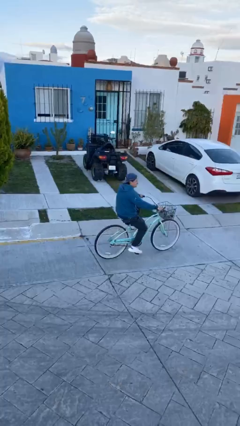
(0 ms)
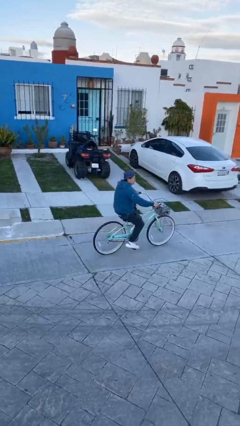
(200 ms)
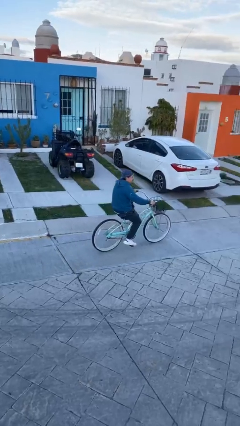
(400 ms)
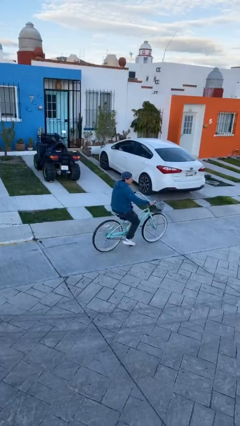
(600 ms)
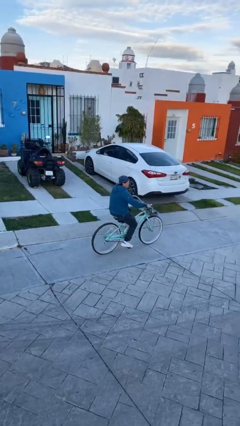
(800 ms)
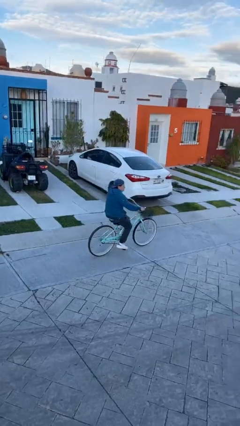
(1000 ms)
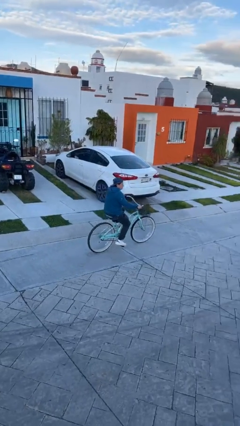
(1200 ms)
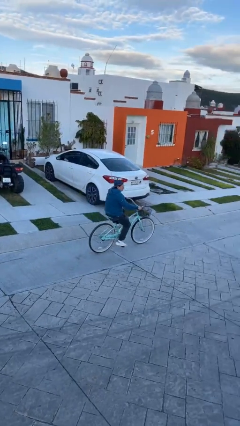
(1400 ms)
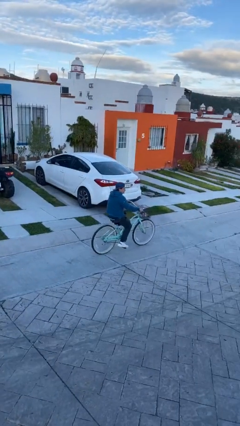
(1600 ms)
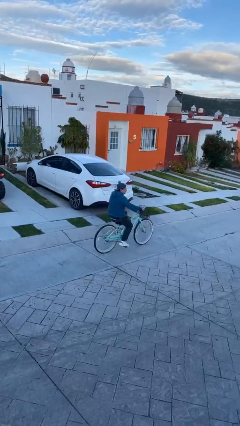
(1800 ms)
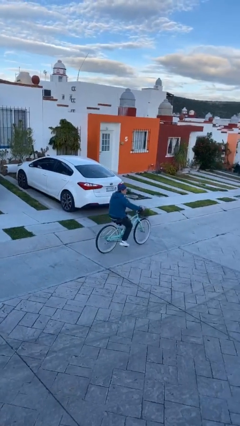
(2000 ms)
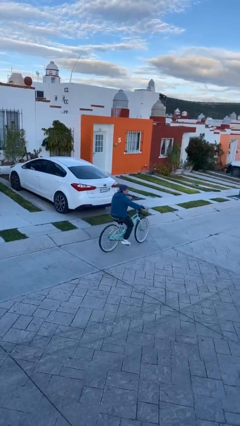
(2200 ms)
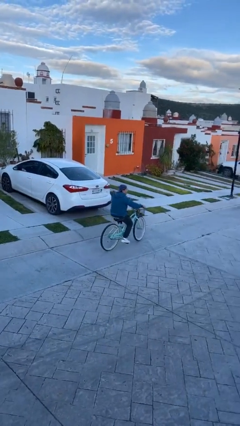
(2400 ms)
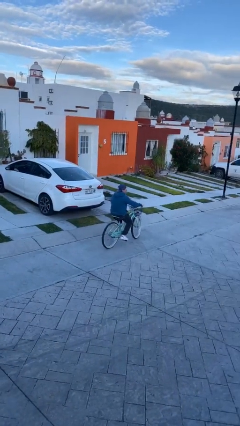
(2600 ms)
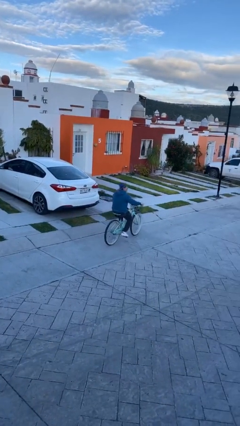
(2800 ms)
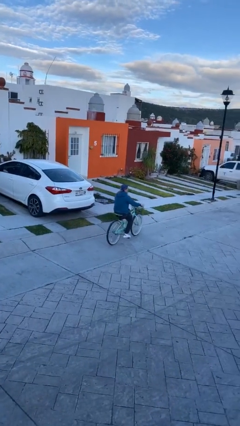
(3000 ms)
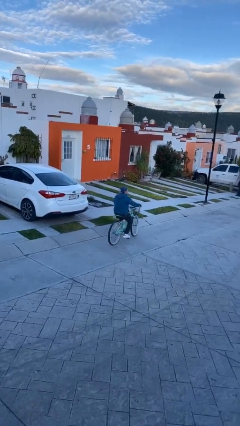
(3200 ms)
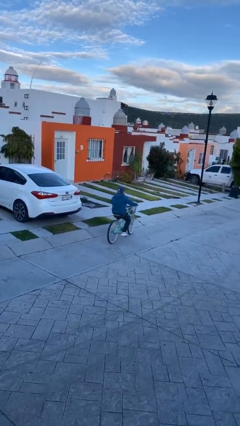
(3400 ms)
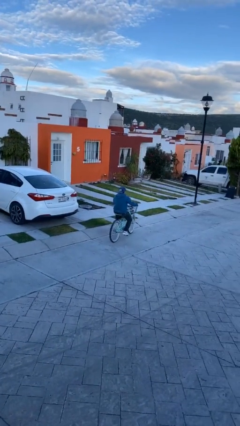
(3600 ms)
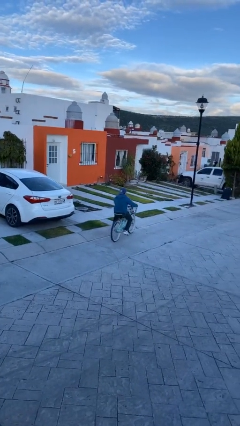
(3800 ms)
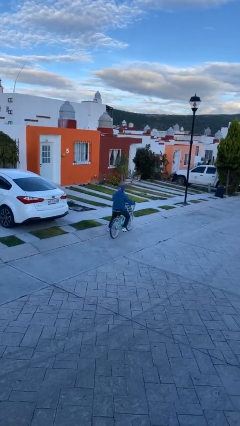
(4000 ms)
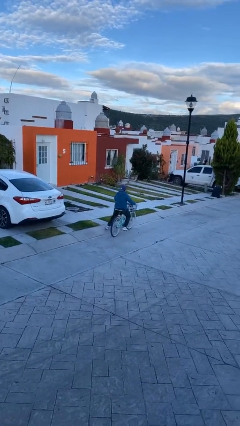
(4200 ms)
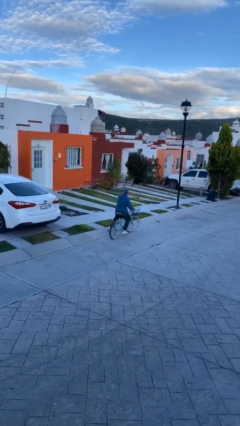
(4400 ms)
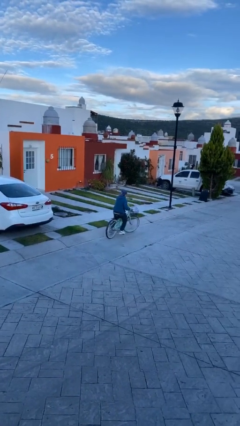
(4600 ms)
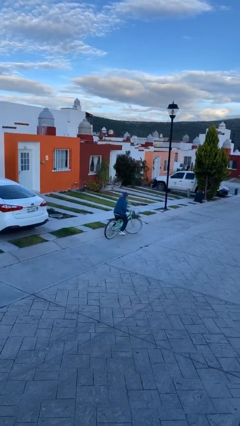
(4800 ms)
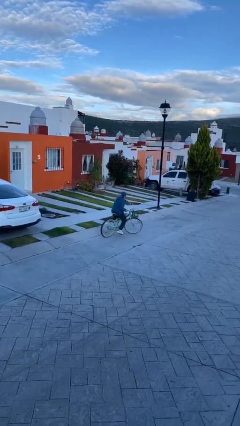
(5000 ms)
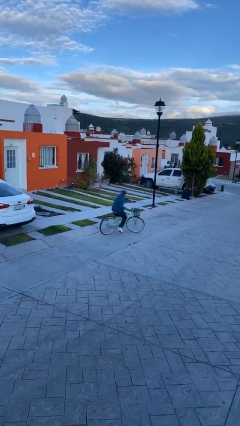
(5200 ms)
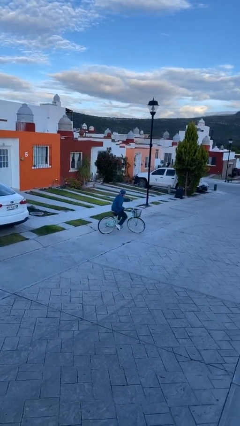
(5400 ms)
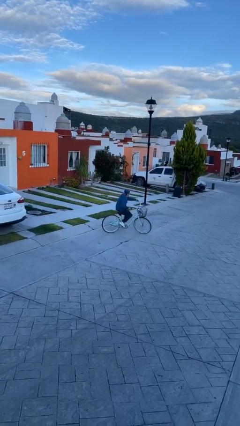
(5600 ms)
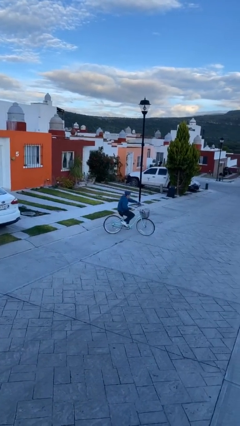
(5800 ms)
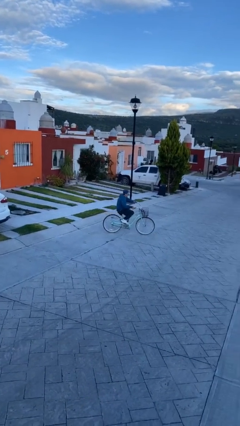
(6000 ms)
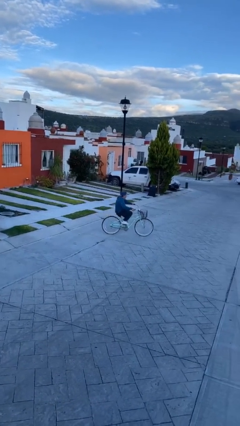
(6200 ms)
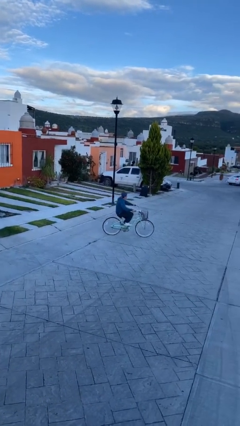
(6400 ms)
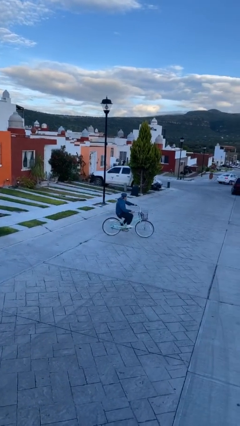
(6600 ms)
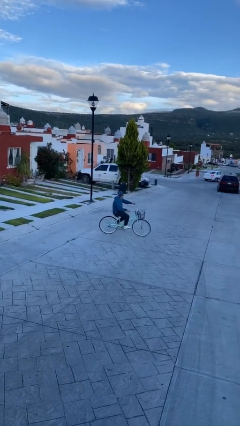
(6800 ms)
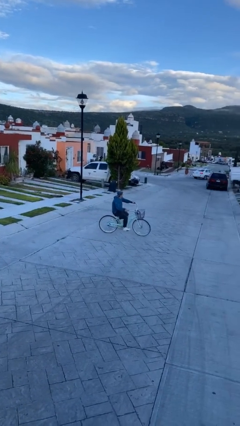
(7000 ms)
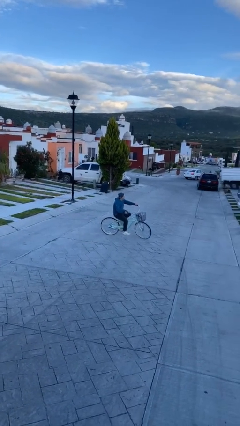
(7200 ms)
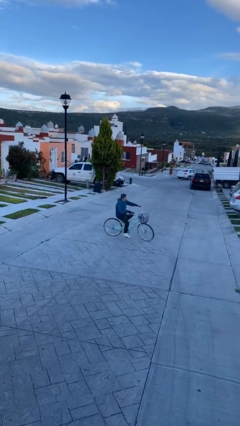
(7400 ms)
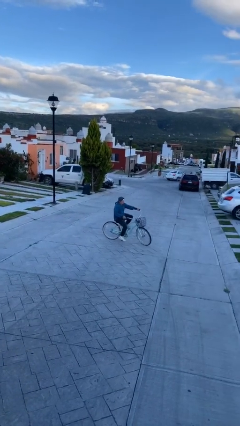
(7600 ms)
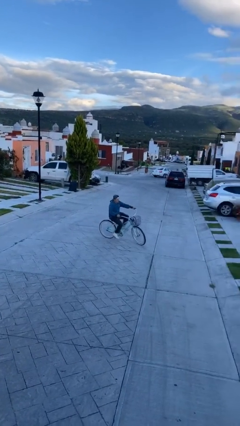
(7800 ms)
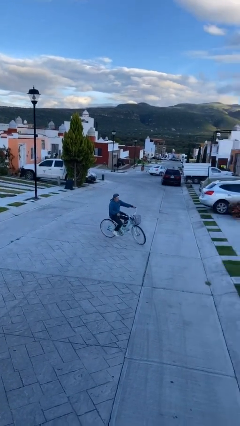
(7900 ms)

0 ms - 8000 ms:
person rides bicycle

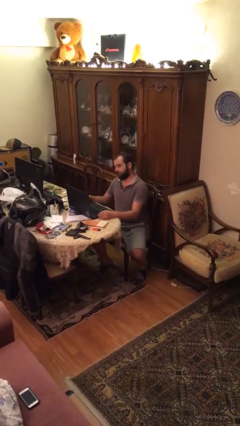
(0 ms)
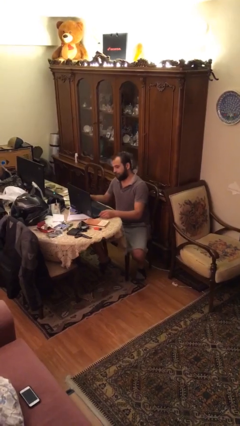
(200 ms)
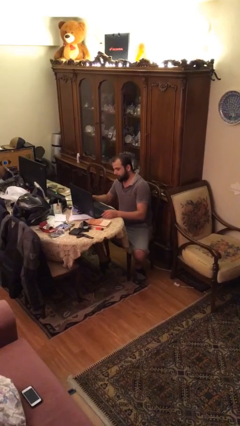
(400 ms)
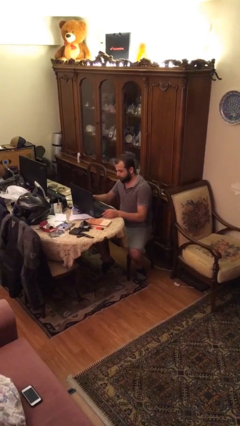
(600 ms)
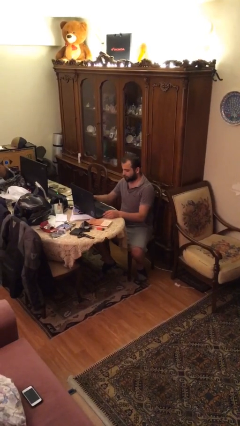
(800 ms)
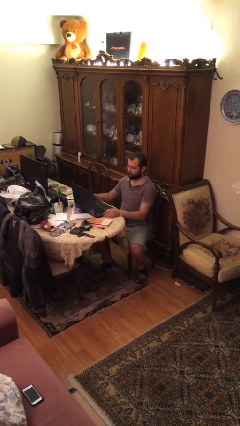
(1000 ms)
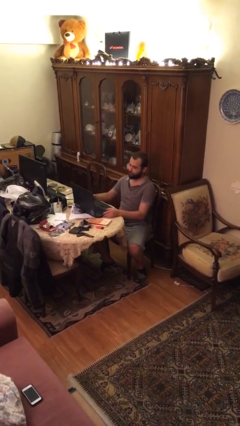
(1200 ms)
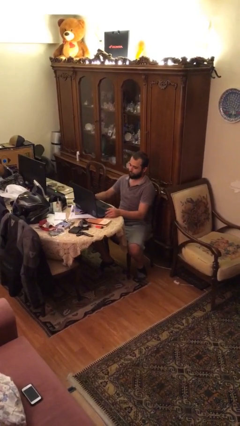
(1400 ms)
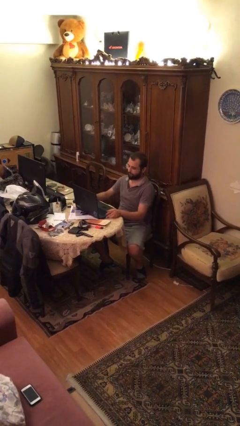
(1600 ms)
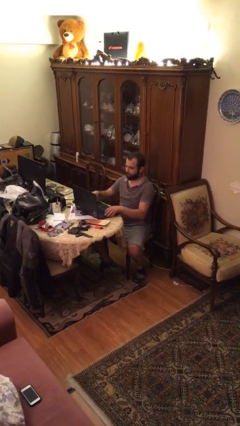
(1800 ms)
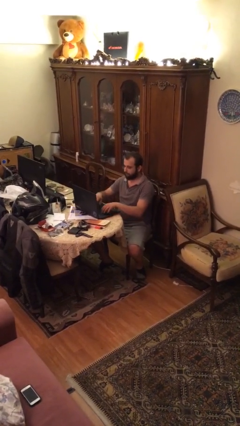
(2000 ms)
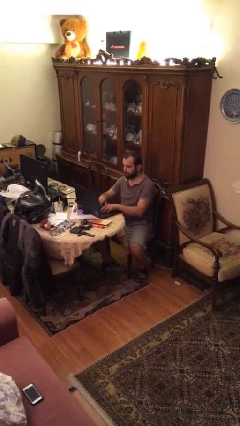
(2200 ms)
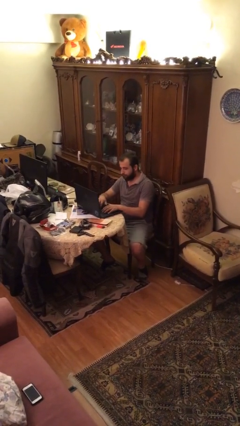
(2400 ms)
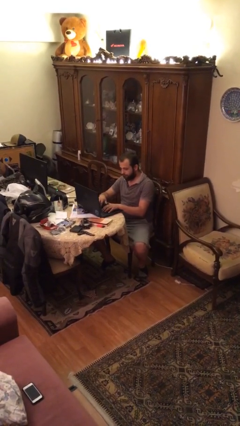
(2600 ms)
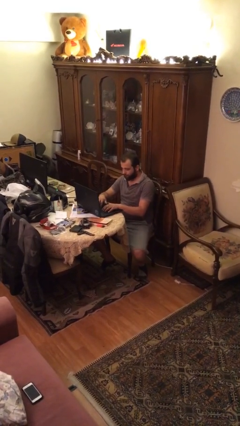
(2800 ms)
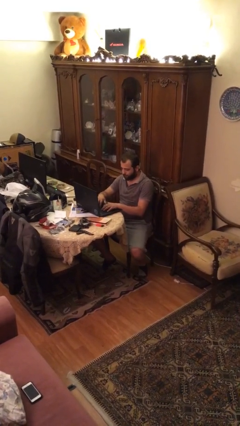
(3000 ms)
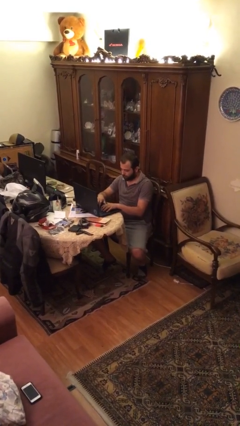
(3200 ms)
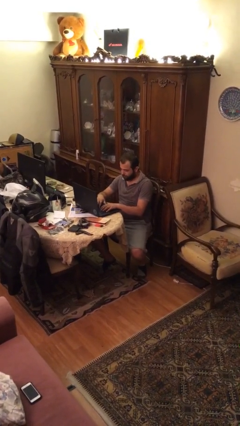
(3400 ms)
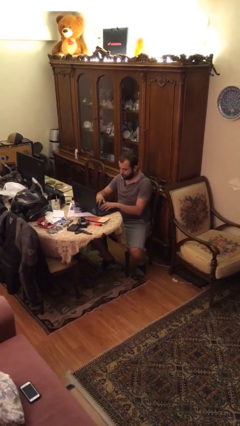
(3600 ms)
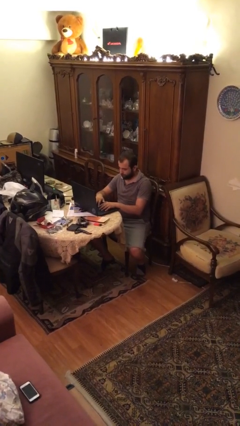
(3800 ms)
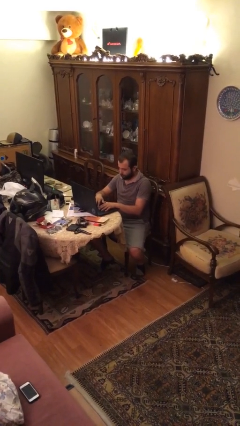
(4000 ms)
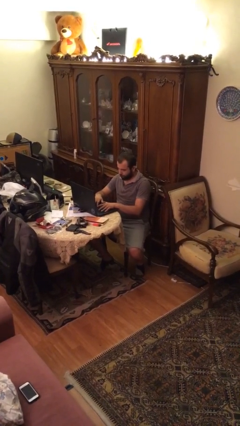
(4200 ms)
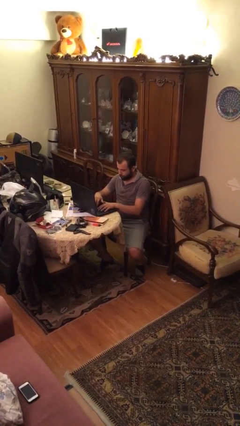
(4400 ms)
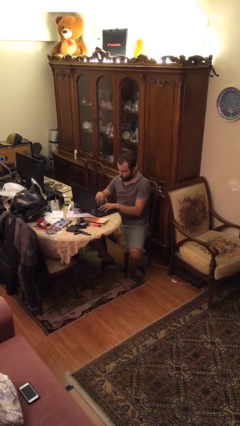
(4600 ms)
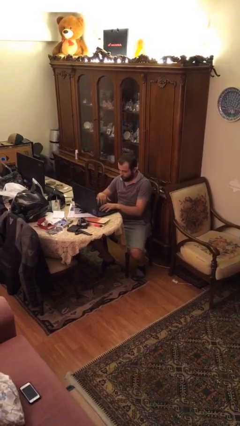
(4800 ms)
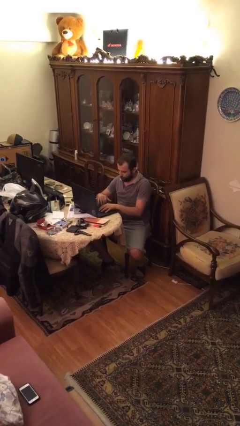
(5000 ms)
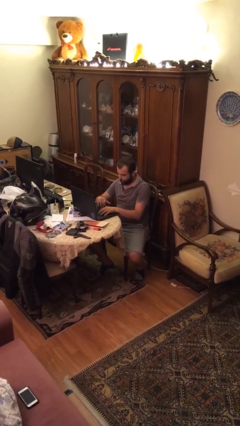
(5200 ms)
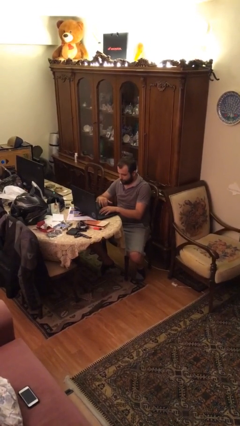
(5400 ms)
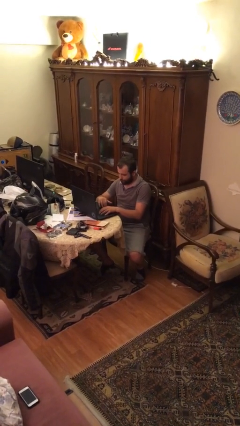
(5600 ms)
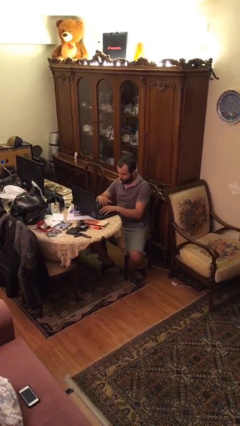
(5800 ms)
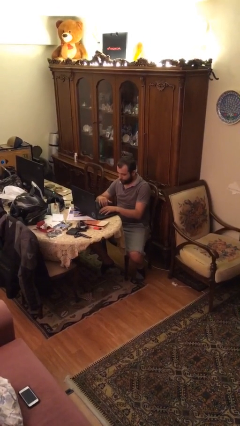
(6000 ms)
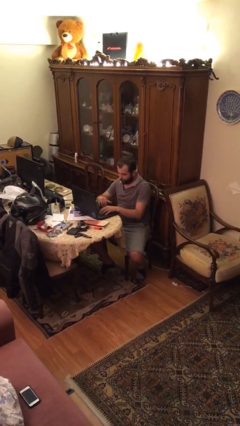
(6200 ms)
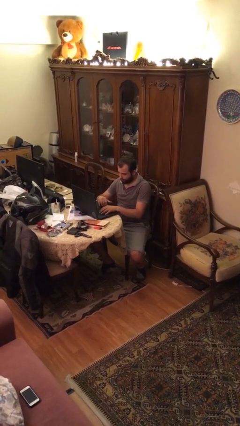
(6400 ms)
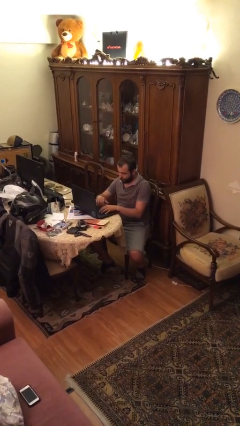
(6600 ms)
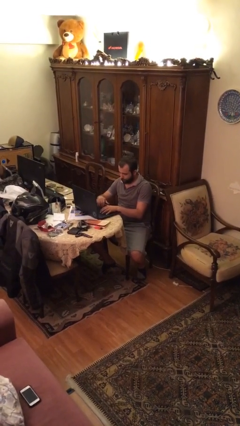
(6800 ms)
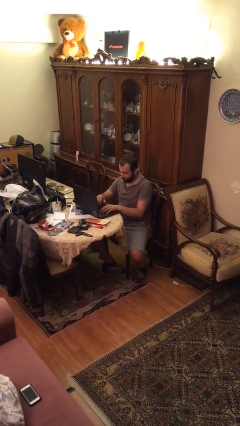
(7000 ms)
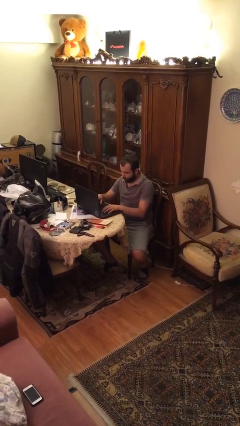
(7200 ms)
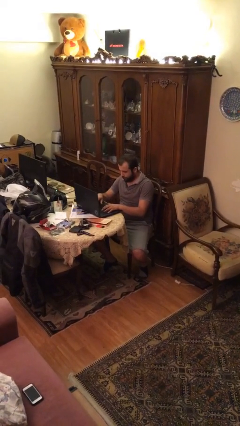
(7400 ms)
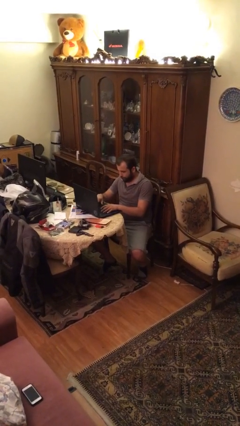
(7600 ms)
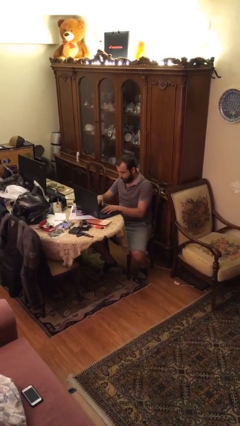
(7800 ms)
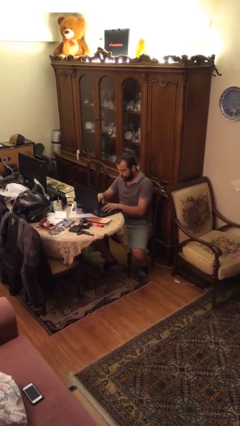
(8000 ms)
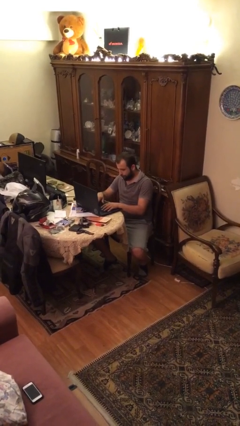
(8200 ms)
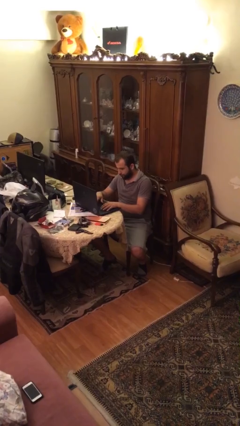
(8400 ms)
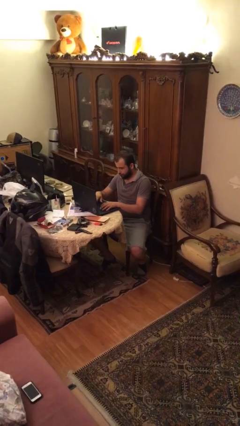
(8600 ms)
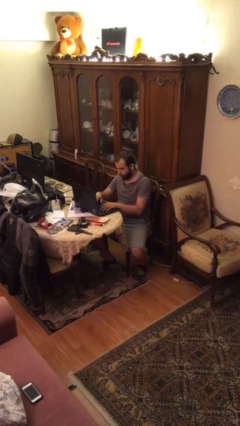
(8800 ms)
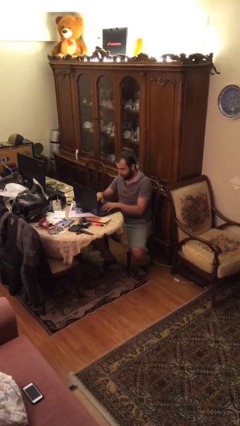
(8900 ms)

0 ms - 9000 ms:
person interacts with laptop

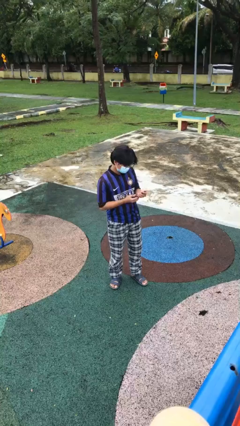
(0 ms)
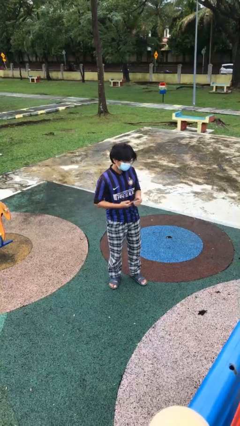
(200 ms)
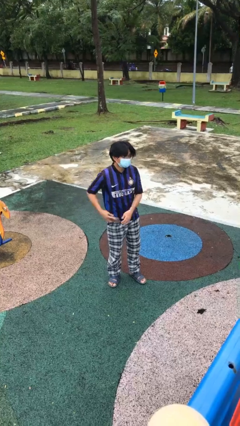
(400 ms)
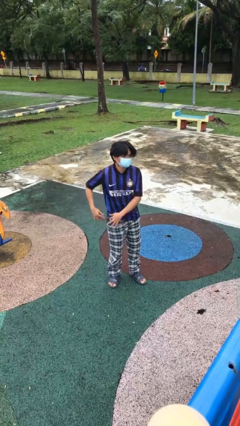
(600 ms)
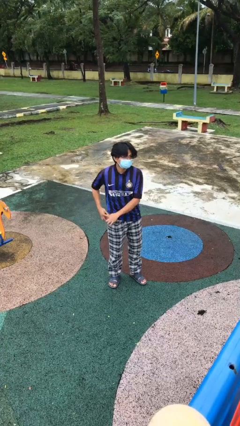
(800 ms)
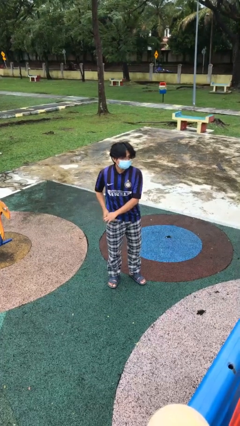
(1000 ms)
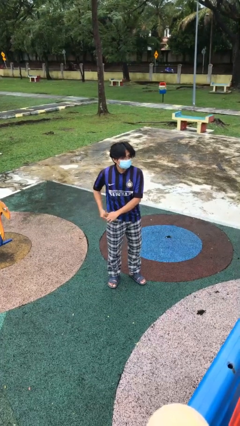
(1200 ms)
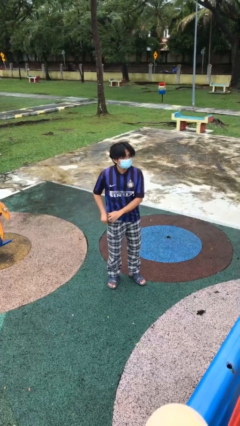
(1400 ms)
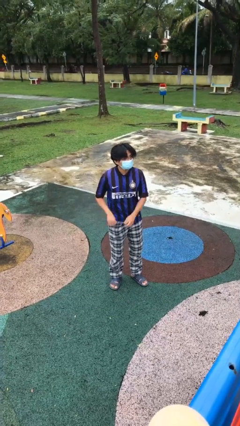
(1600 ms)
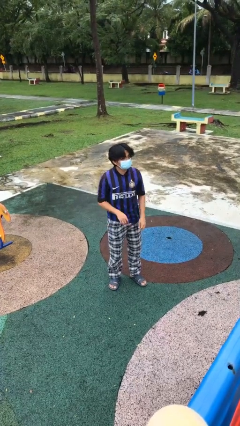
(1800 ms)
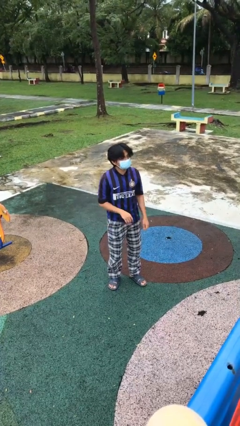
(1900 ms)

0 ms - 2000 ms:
person puts phone into pocket
